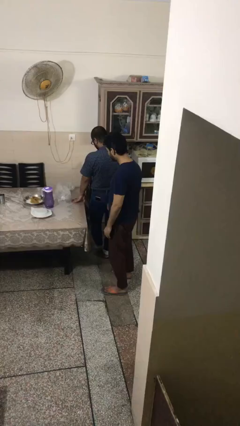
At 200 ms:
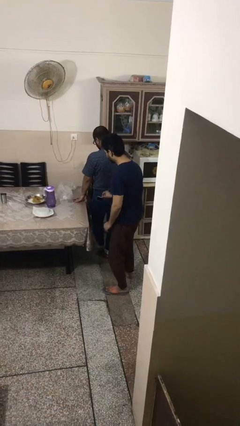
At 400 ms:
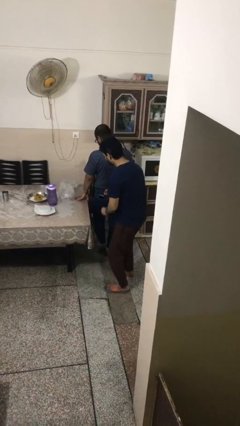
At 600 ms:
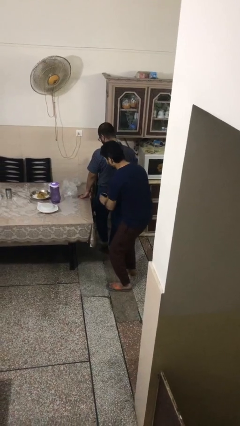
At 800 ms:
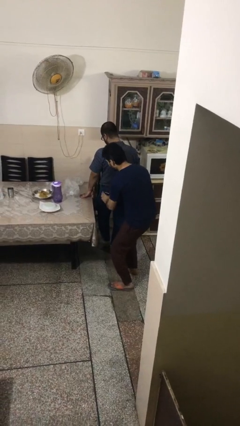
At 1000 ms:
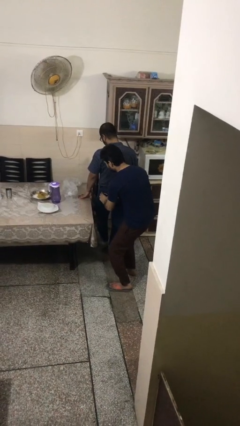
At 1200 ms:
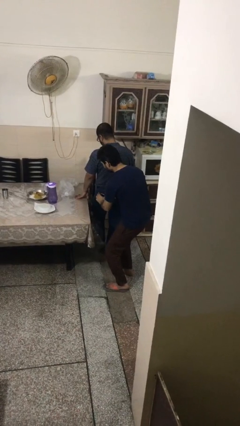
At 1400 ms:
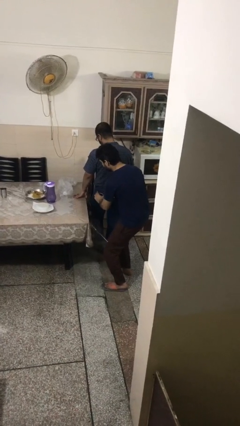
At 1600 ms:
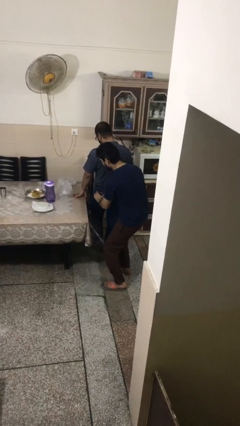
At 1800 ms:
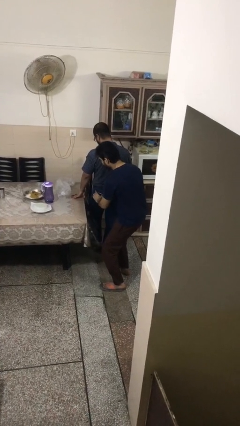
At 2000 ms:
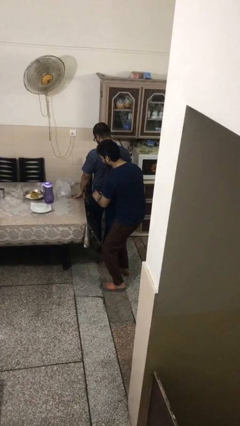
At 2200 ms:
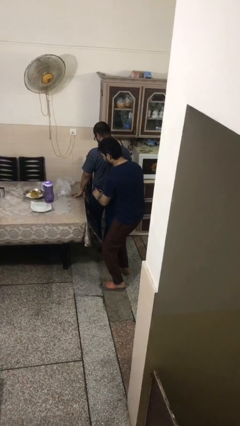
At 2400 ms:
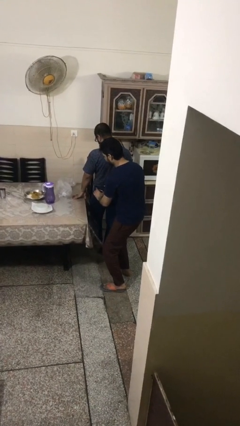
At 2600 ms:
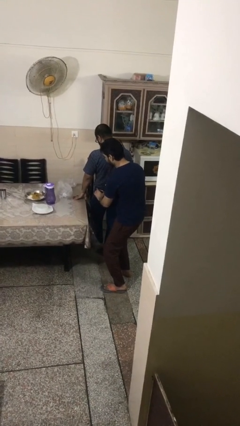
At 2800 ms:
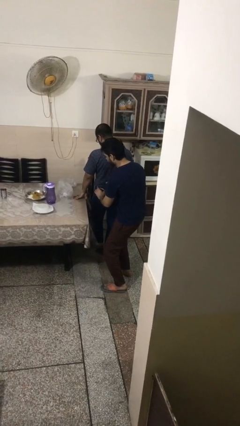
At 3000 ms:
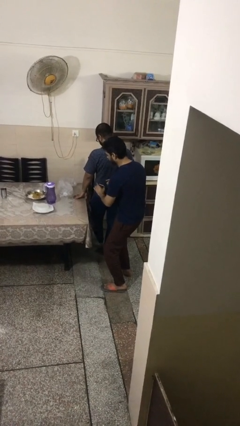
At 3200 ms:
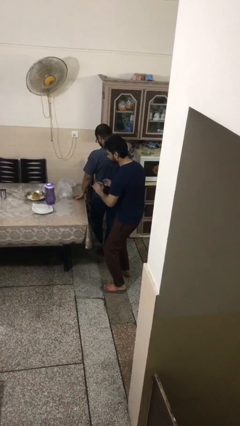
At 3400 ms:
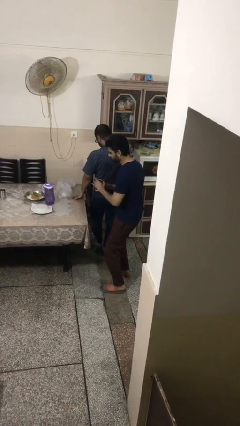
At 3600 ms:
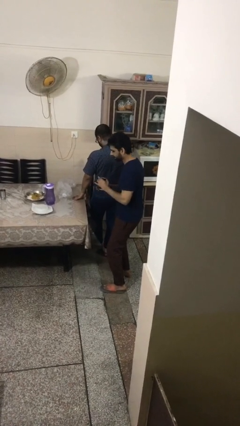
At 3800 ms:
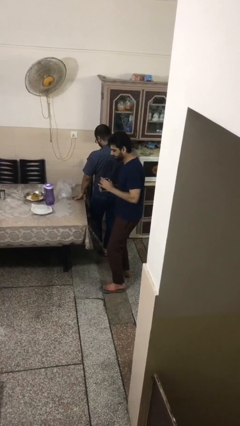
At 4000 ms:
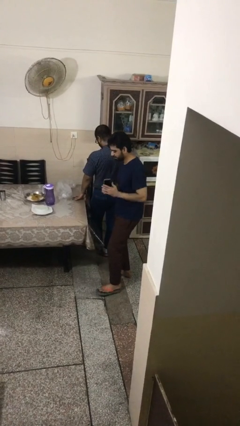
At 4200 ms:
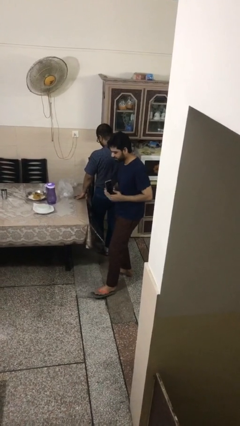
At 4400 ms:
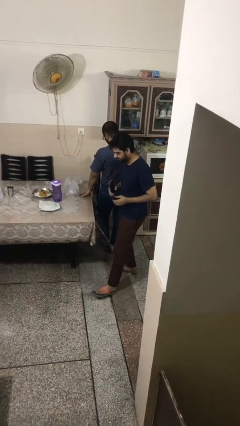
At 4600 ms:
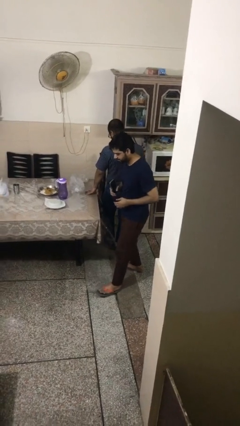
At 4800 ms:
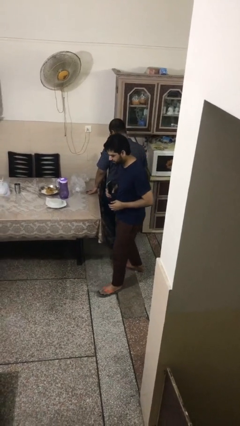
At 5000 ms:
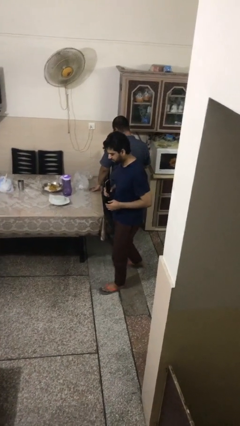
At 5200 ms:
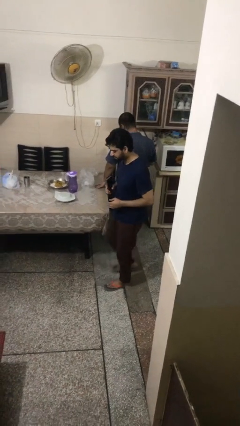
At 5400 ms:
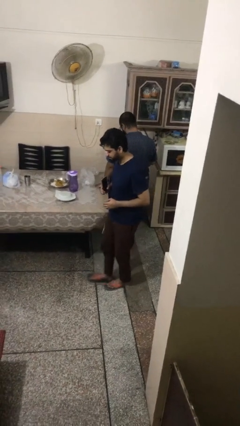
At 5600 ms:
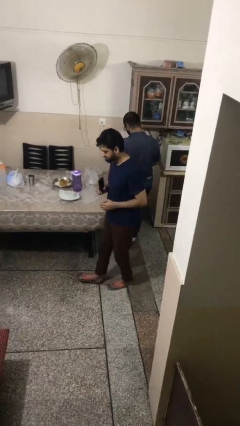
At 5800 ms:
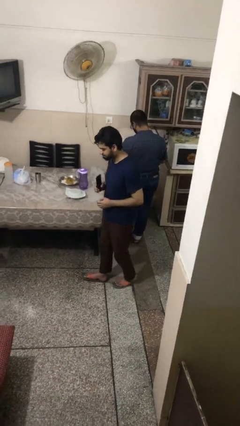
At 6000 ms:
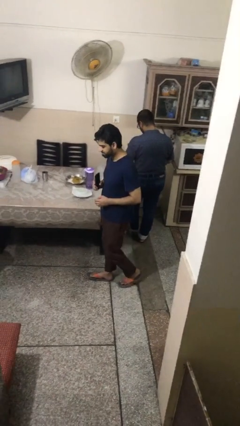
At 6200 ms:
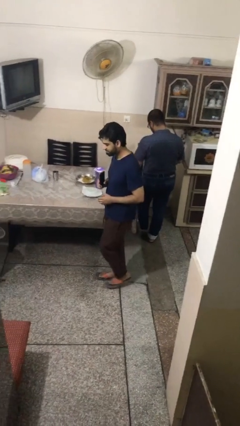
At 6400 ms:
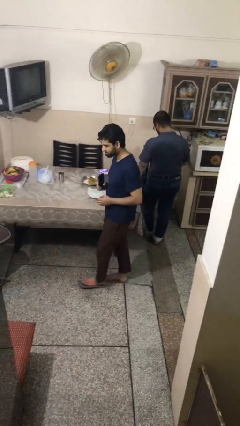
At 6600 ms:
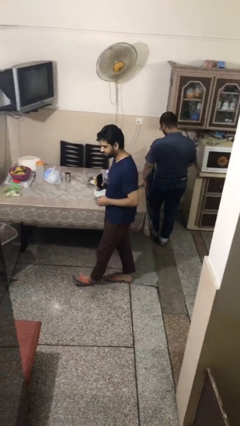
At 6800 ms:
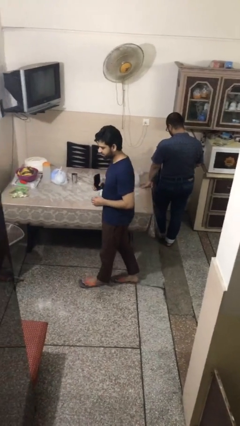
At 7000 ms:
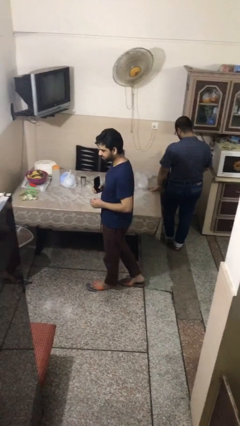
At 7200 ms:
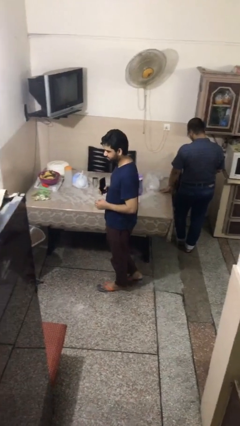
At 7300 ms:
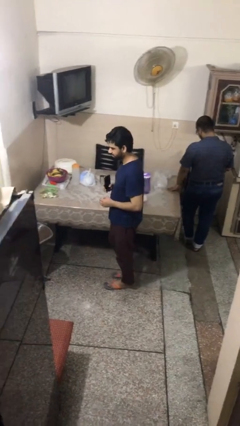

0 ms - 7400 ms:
person steals object from person

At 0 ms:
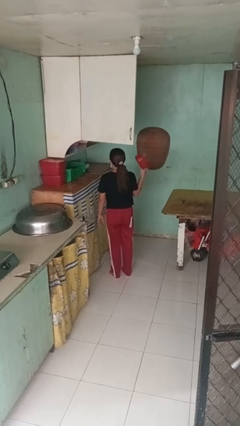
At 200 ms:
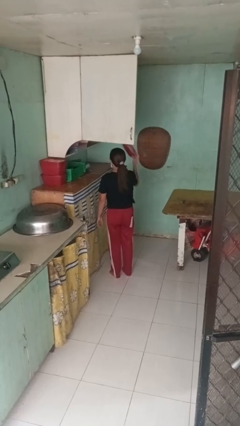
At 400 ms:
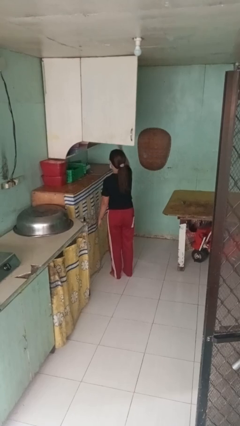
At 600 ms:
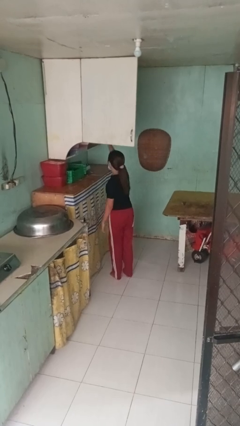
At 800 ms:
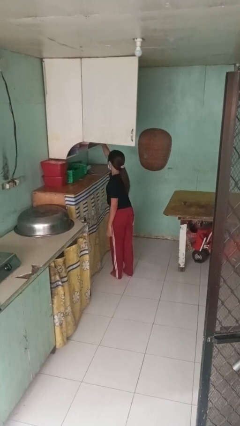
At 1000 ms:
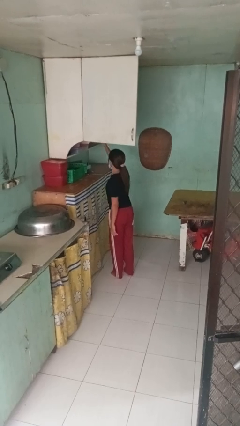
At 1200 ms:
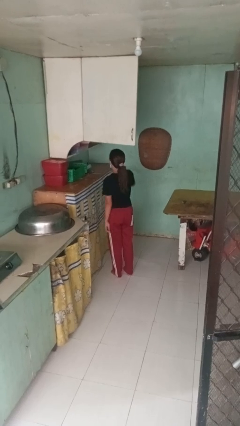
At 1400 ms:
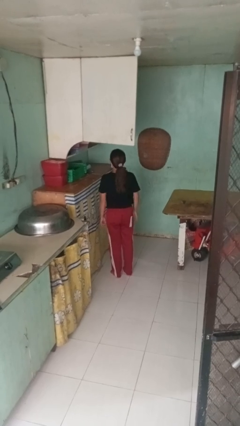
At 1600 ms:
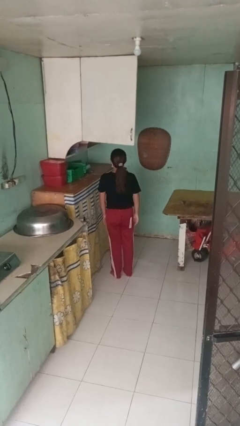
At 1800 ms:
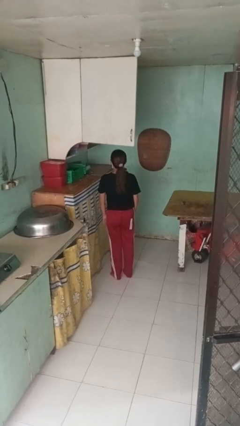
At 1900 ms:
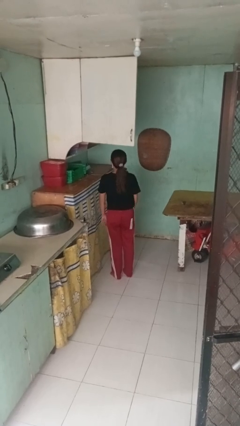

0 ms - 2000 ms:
person puts object in cabinet

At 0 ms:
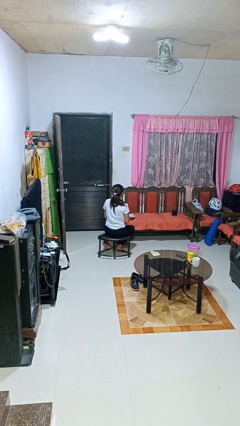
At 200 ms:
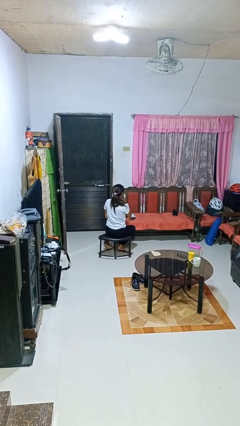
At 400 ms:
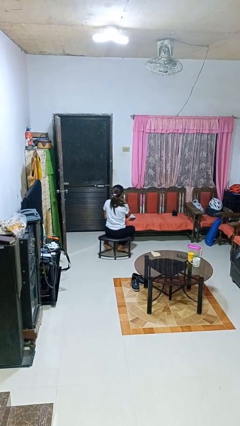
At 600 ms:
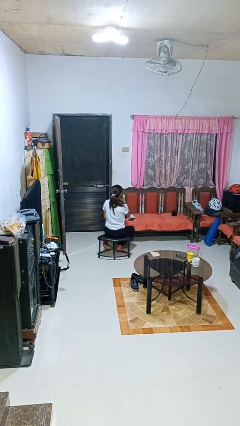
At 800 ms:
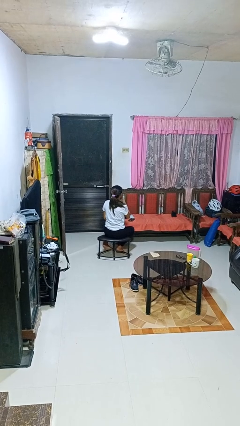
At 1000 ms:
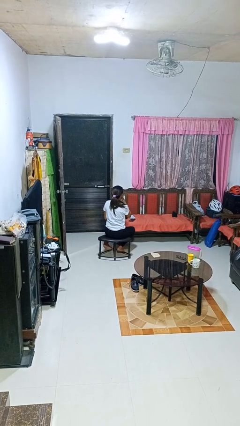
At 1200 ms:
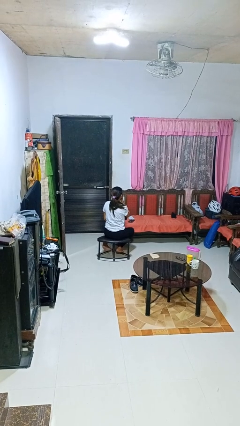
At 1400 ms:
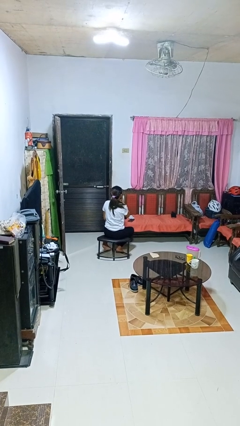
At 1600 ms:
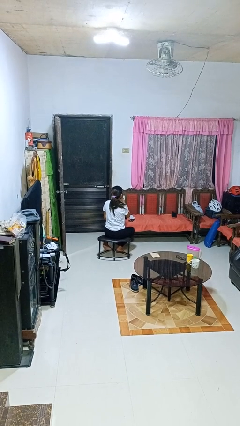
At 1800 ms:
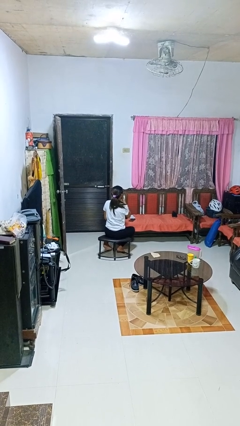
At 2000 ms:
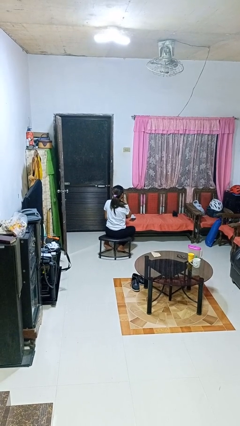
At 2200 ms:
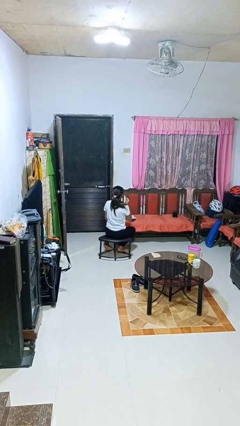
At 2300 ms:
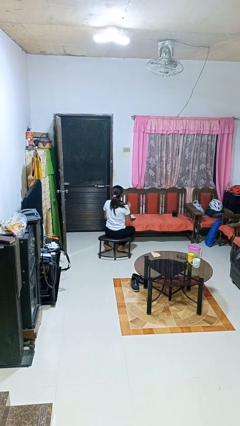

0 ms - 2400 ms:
person strokes chin

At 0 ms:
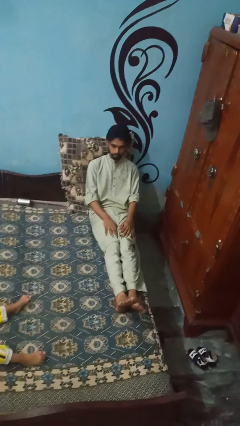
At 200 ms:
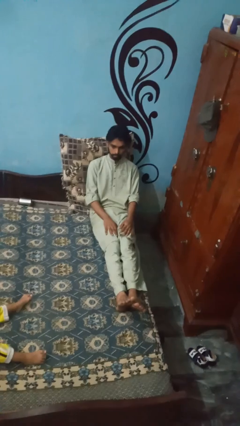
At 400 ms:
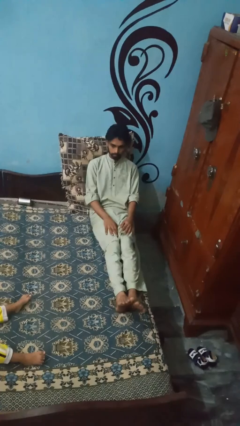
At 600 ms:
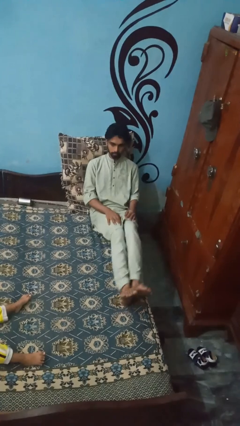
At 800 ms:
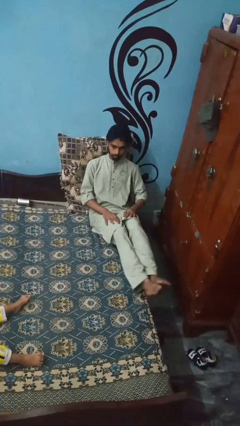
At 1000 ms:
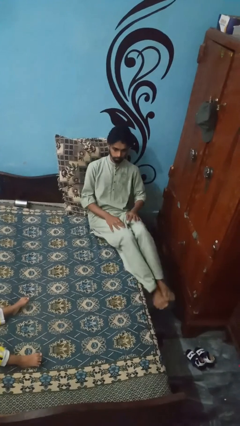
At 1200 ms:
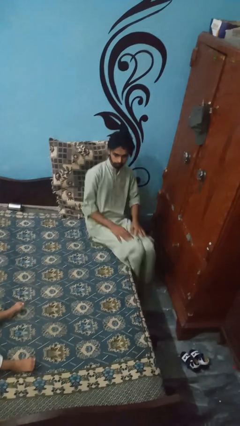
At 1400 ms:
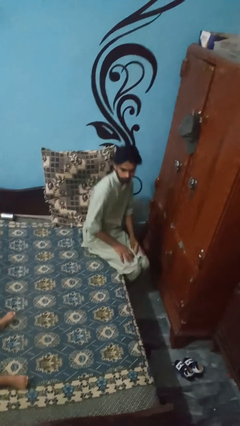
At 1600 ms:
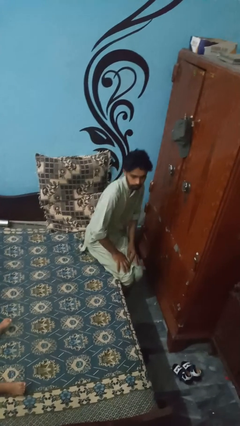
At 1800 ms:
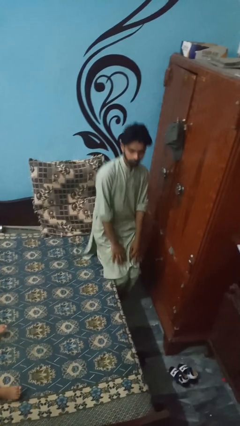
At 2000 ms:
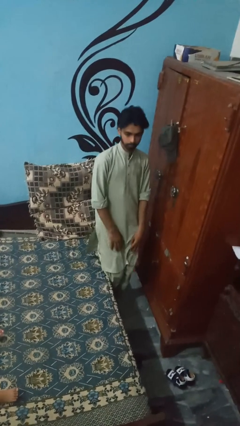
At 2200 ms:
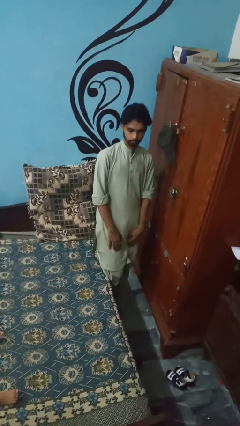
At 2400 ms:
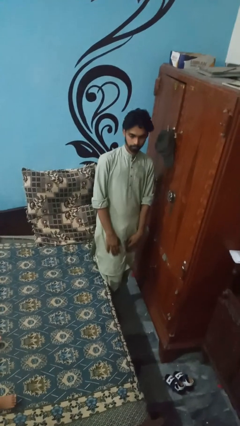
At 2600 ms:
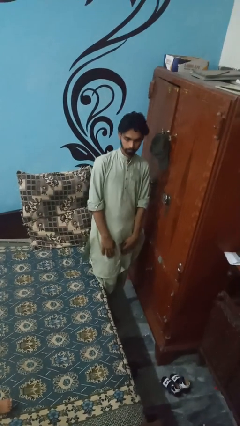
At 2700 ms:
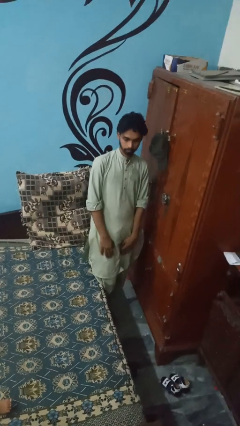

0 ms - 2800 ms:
person stands up

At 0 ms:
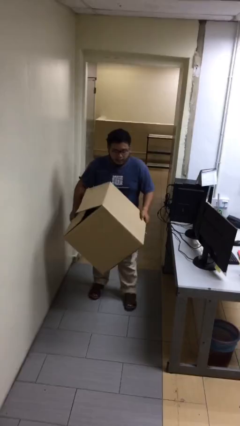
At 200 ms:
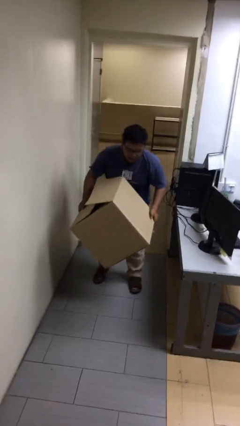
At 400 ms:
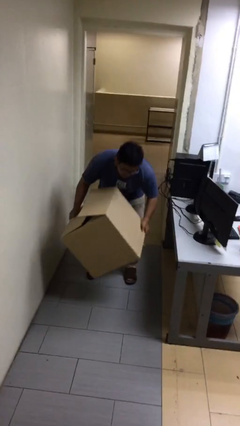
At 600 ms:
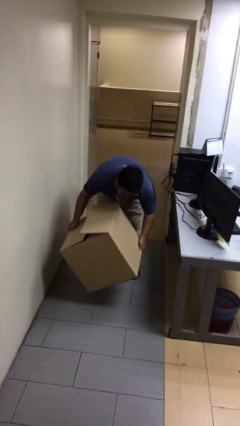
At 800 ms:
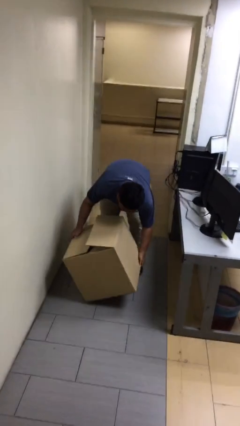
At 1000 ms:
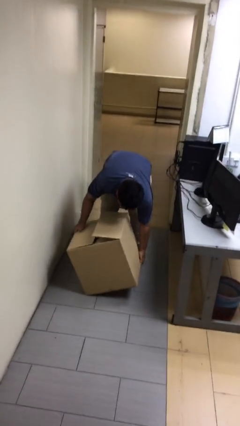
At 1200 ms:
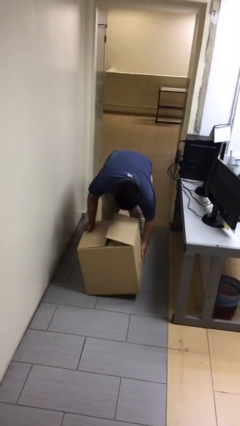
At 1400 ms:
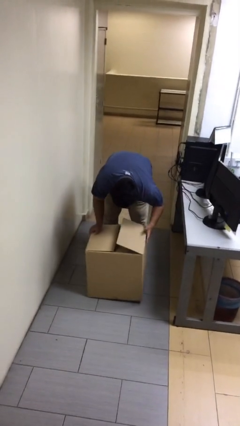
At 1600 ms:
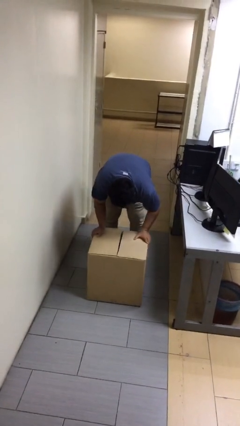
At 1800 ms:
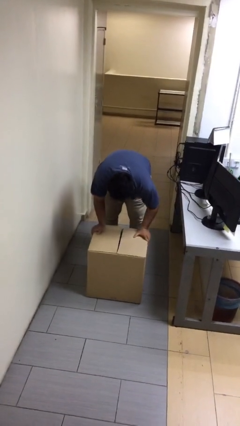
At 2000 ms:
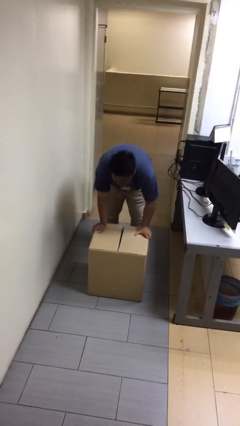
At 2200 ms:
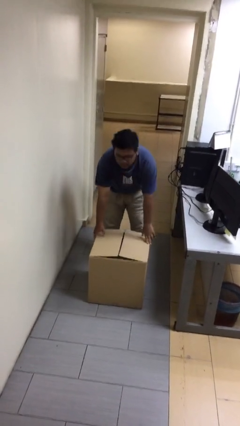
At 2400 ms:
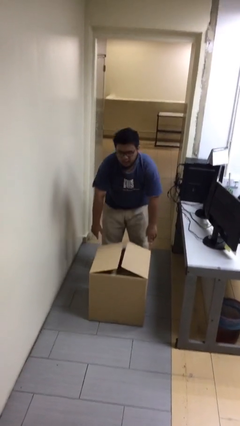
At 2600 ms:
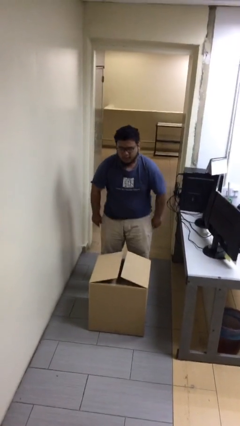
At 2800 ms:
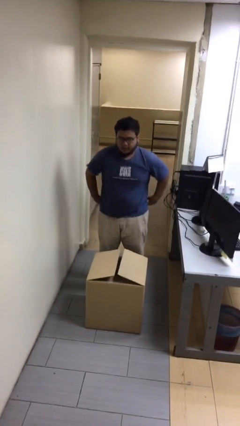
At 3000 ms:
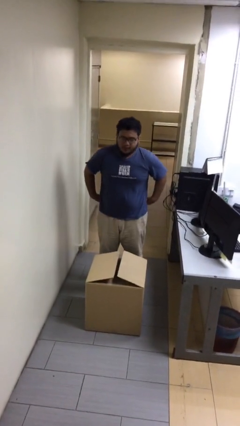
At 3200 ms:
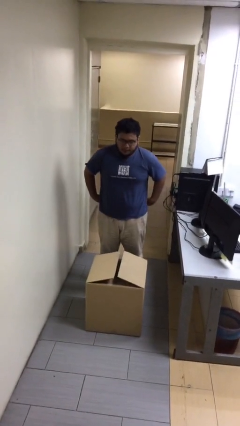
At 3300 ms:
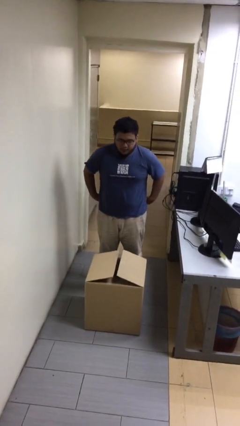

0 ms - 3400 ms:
person puts down object on floor
